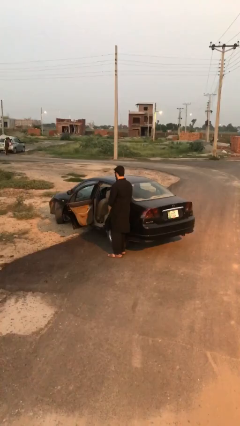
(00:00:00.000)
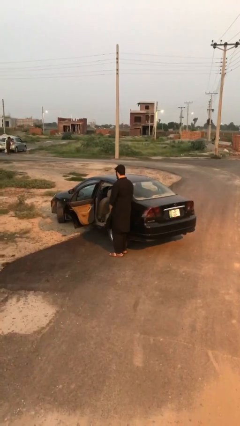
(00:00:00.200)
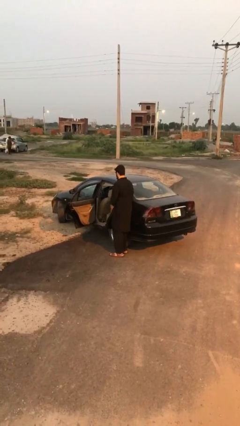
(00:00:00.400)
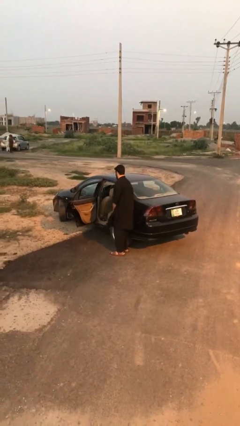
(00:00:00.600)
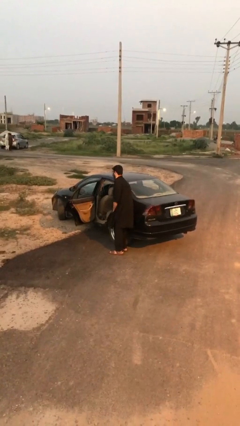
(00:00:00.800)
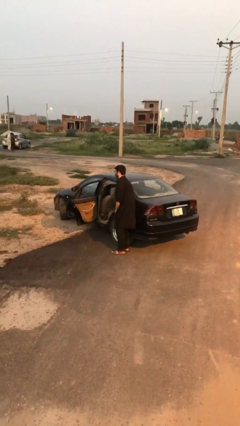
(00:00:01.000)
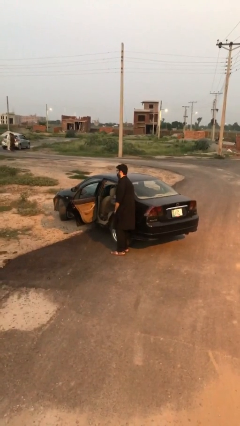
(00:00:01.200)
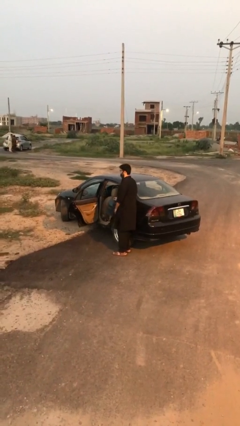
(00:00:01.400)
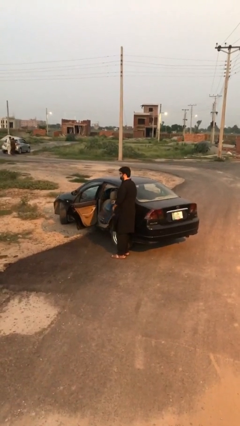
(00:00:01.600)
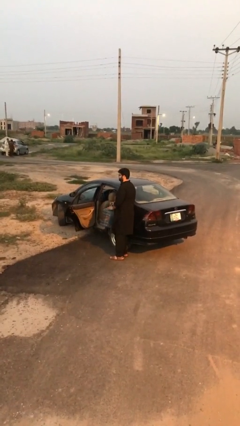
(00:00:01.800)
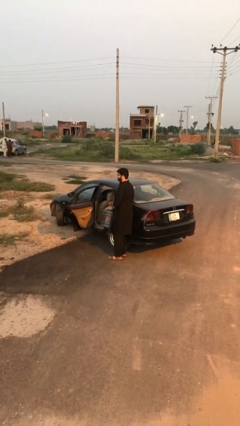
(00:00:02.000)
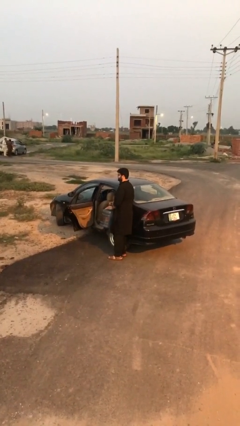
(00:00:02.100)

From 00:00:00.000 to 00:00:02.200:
person unloads car

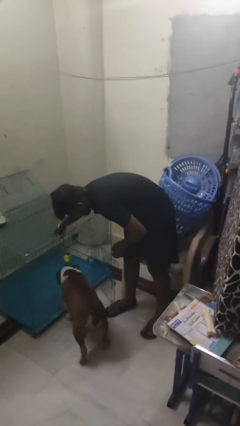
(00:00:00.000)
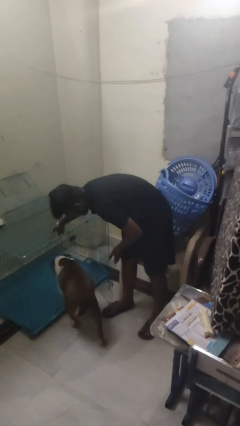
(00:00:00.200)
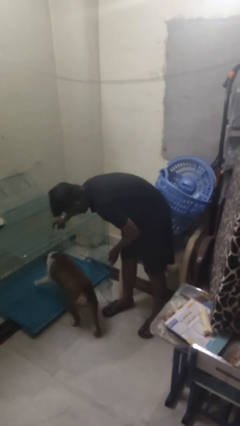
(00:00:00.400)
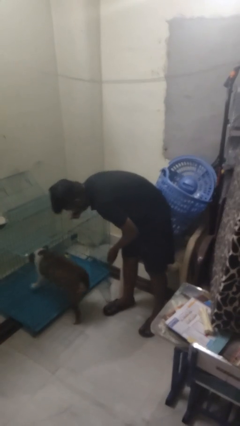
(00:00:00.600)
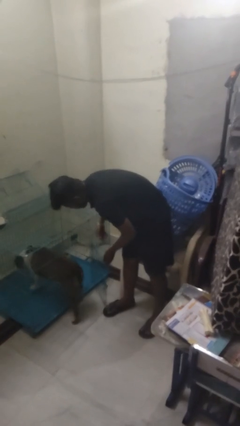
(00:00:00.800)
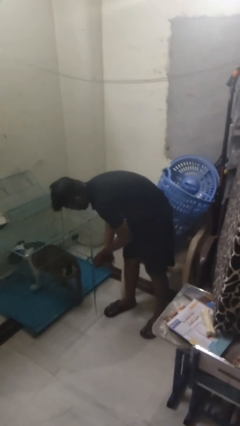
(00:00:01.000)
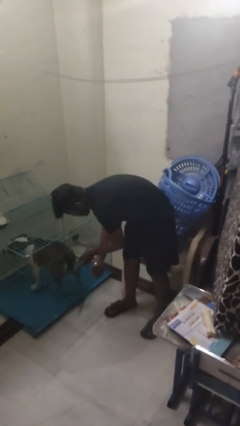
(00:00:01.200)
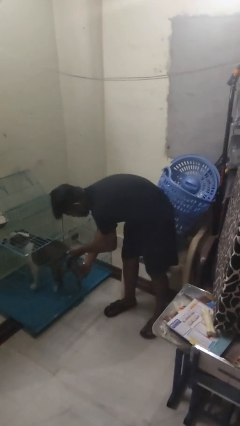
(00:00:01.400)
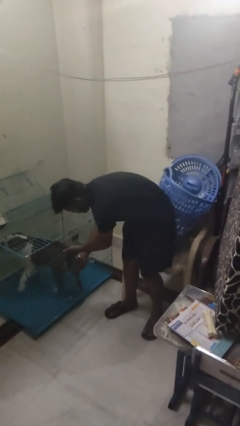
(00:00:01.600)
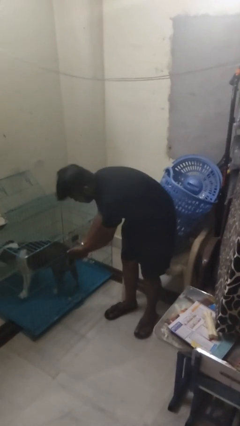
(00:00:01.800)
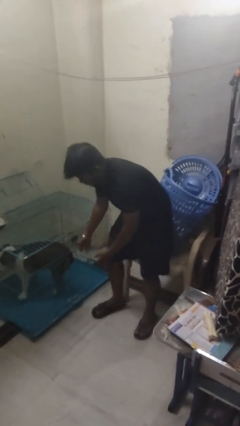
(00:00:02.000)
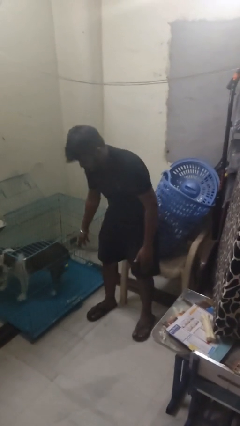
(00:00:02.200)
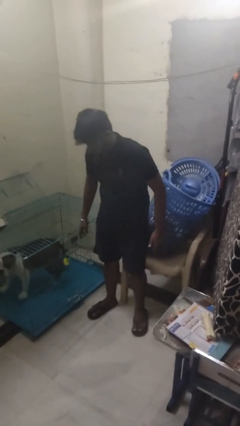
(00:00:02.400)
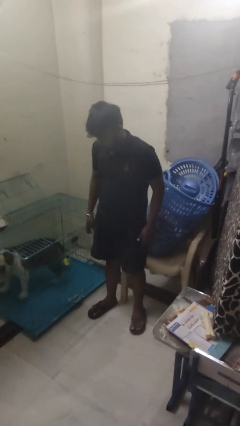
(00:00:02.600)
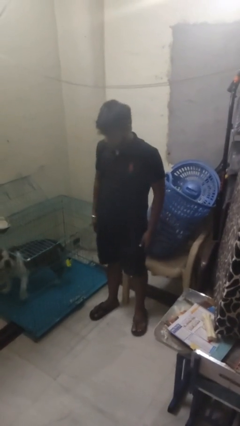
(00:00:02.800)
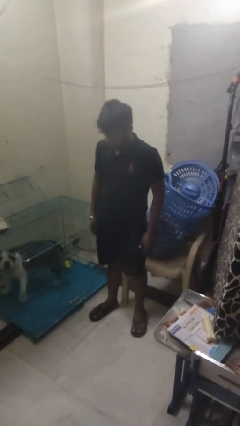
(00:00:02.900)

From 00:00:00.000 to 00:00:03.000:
person crates dog

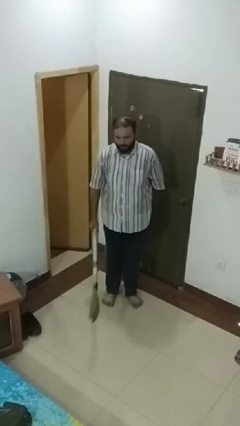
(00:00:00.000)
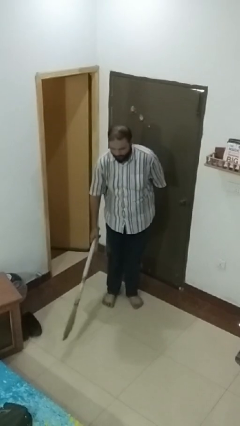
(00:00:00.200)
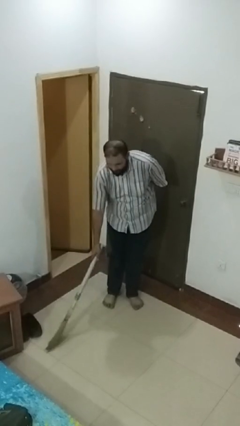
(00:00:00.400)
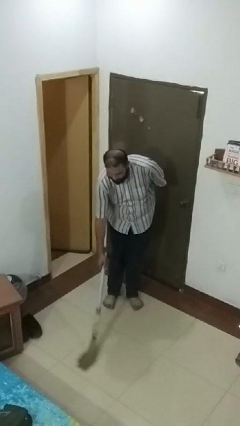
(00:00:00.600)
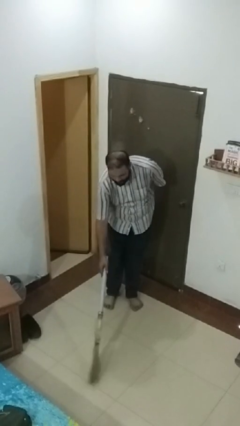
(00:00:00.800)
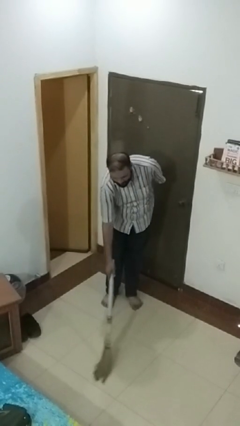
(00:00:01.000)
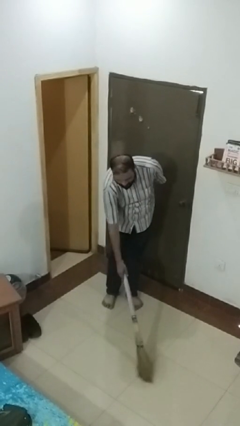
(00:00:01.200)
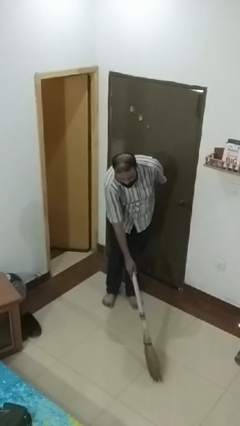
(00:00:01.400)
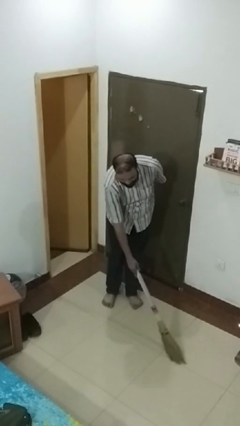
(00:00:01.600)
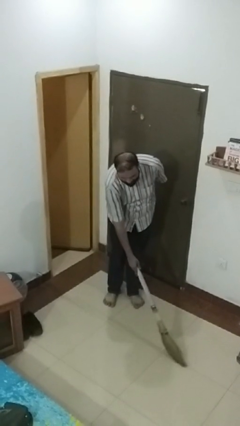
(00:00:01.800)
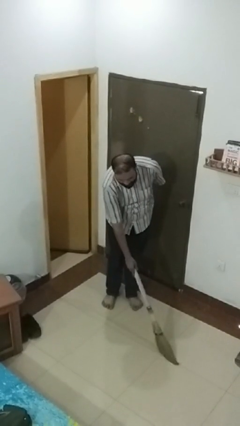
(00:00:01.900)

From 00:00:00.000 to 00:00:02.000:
person sweeps floor

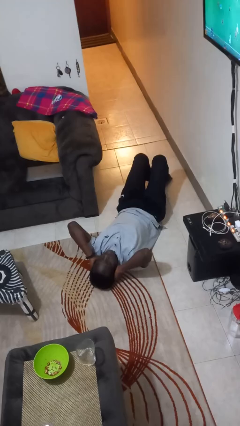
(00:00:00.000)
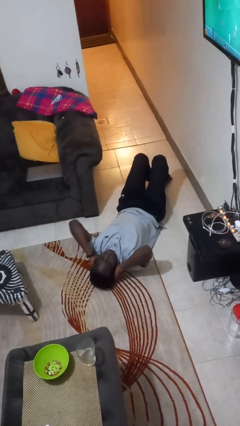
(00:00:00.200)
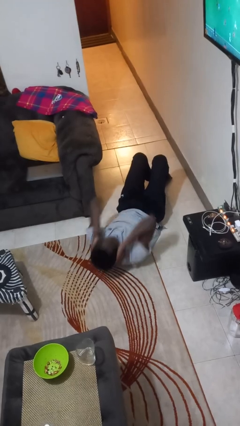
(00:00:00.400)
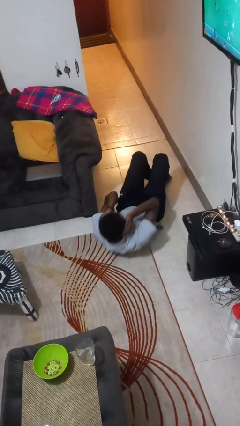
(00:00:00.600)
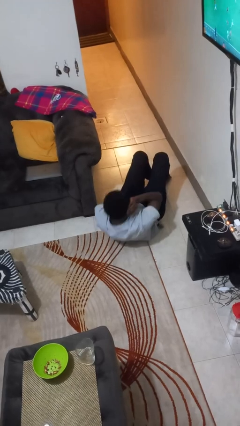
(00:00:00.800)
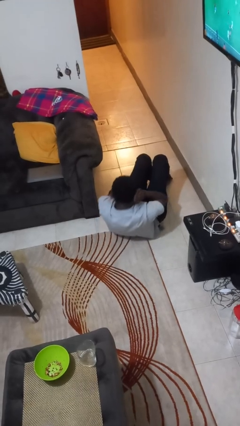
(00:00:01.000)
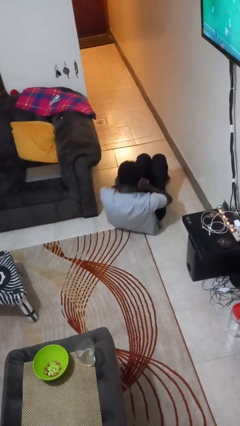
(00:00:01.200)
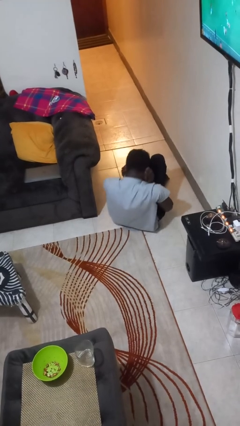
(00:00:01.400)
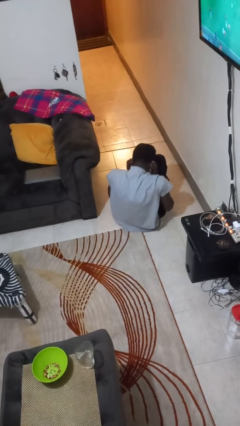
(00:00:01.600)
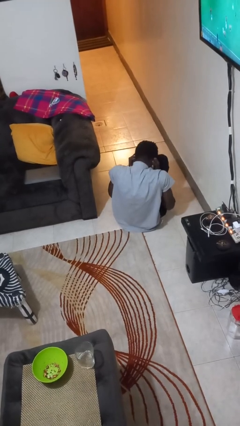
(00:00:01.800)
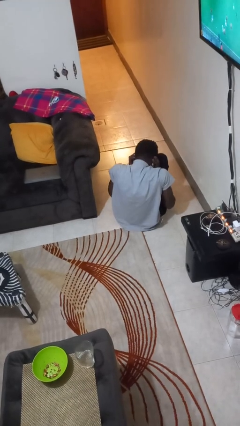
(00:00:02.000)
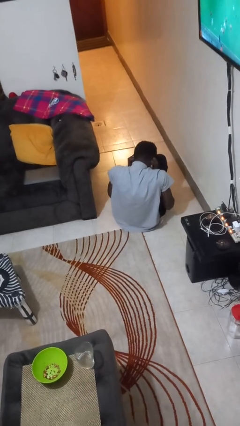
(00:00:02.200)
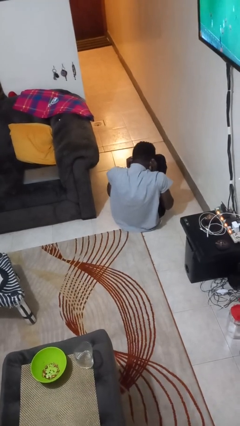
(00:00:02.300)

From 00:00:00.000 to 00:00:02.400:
person exercises with situp

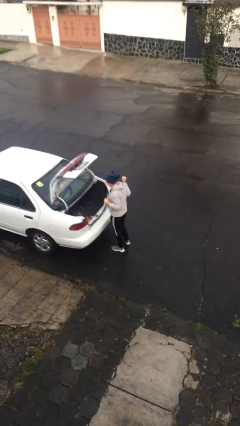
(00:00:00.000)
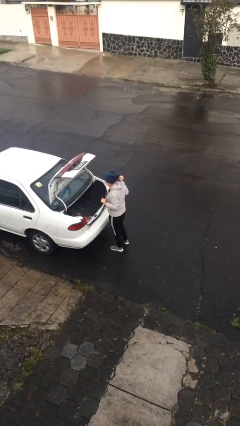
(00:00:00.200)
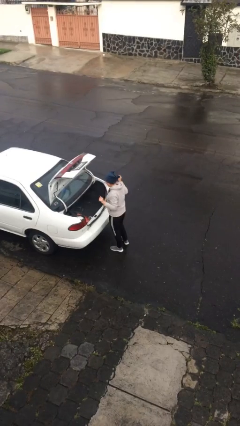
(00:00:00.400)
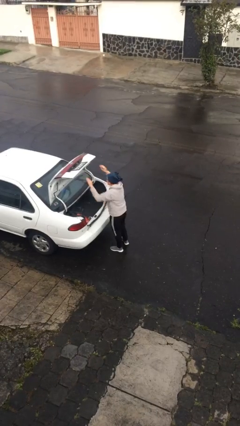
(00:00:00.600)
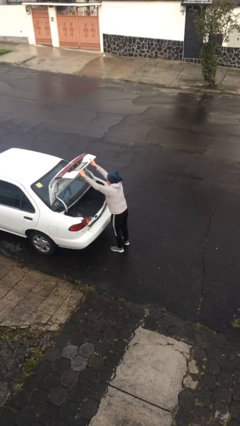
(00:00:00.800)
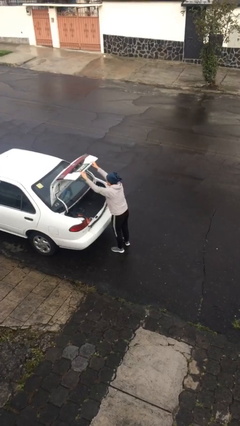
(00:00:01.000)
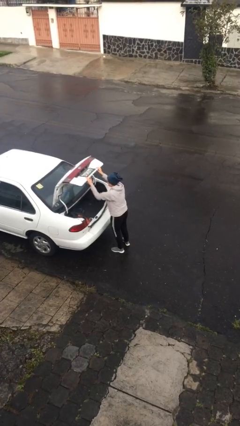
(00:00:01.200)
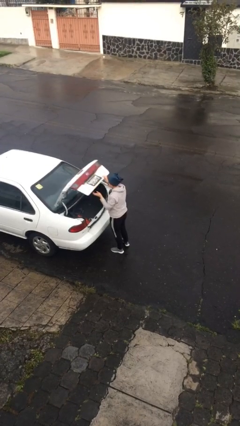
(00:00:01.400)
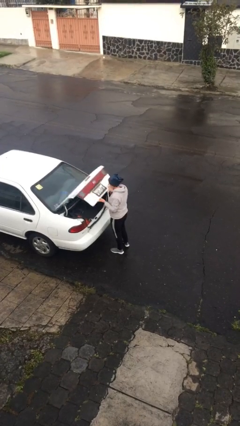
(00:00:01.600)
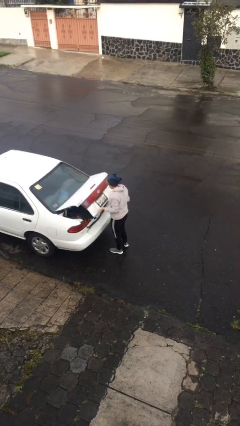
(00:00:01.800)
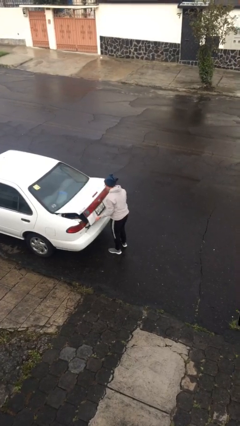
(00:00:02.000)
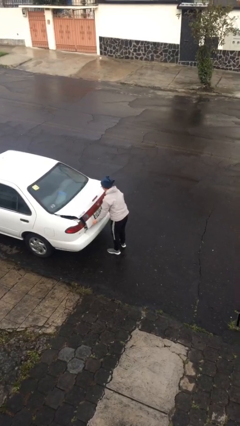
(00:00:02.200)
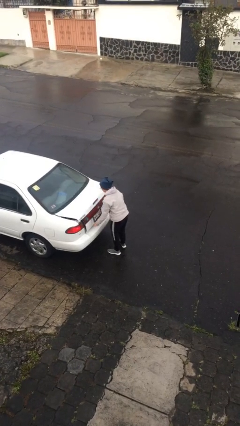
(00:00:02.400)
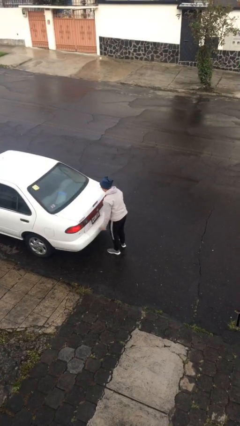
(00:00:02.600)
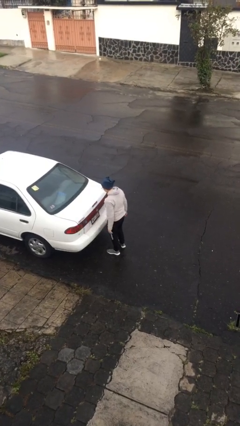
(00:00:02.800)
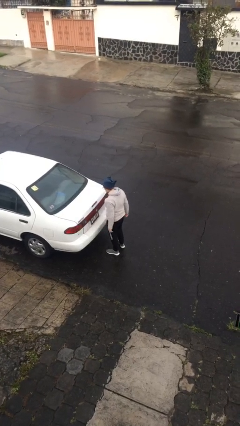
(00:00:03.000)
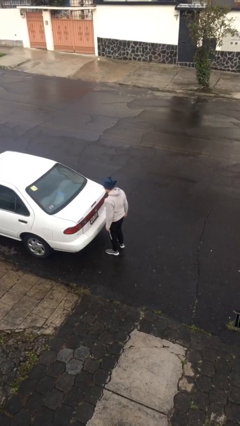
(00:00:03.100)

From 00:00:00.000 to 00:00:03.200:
person closes car trunk

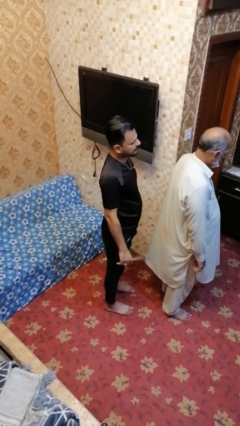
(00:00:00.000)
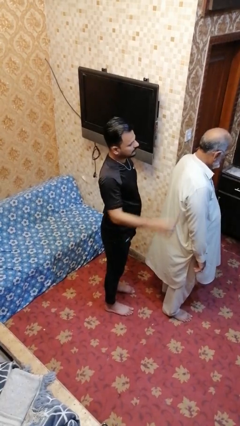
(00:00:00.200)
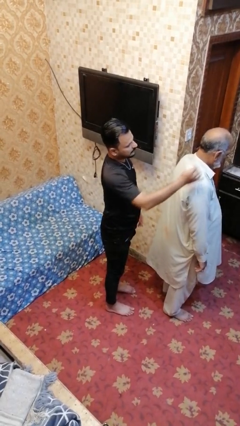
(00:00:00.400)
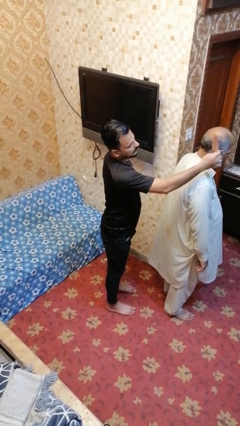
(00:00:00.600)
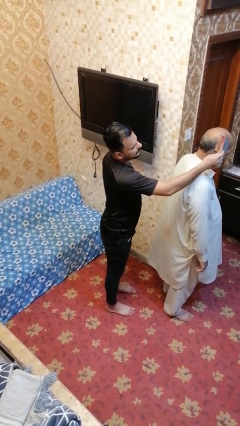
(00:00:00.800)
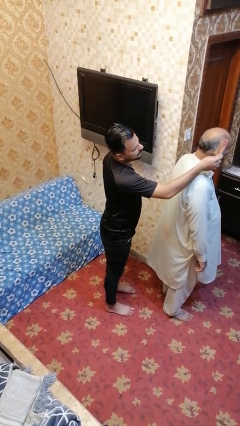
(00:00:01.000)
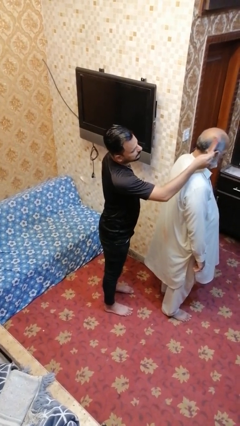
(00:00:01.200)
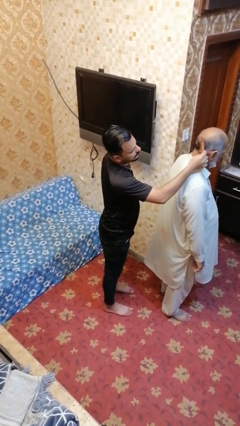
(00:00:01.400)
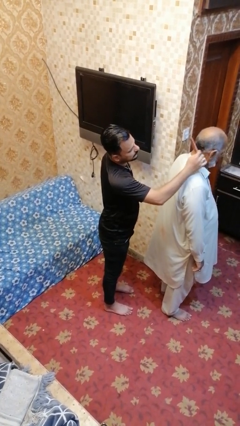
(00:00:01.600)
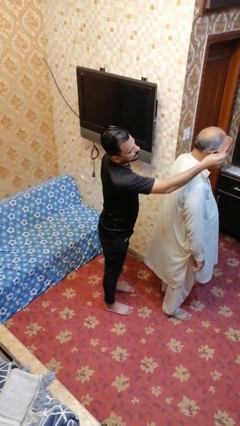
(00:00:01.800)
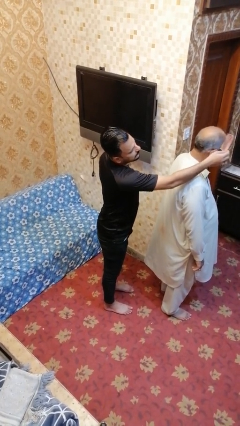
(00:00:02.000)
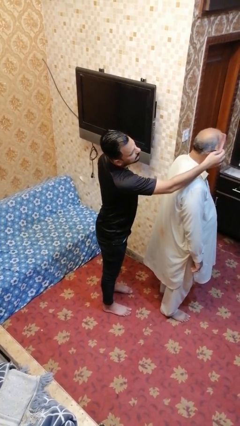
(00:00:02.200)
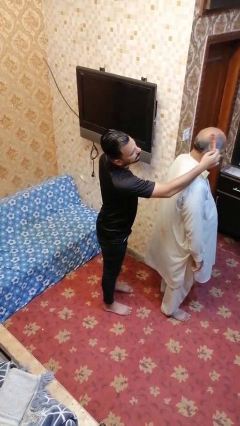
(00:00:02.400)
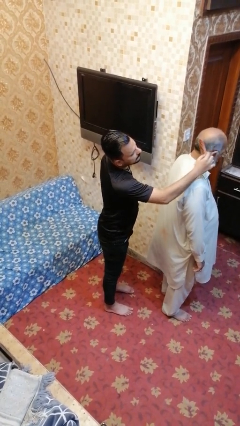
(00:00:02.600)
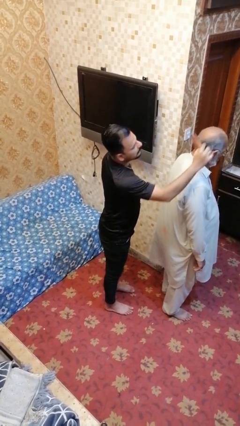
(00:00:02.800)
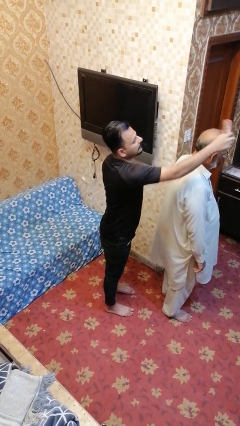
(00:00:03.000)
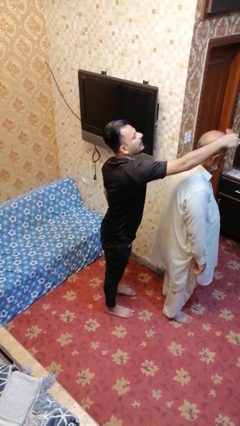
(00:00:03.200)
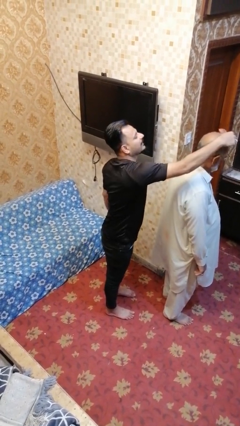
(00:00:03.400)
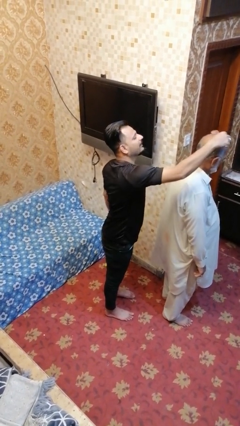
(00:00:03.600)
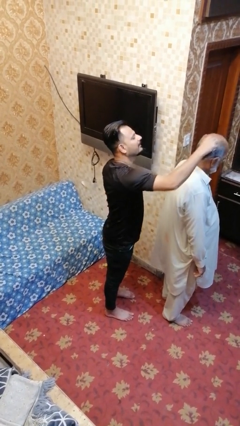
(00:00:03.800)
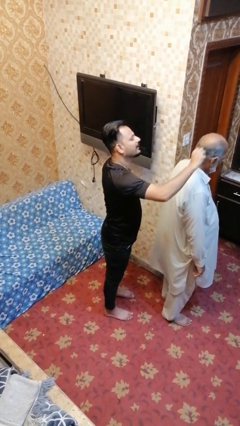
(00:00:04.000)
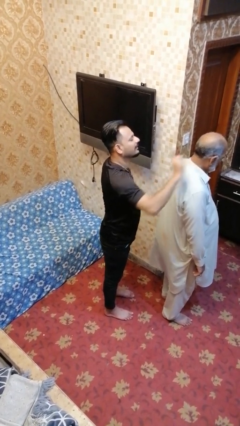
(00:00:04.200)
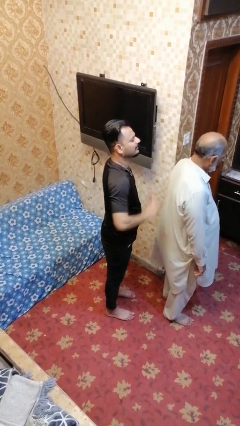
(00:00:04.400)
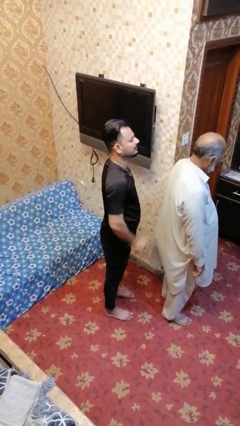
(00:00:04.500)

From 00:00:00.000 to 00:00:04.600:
person brushes hair of person
